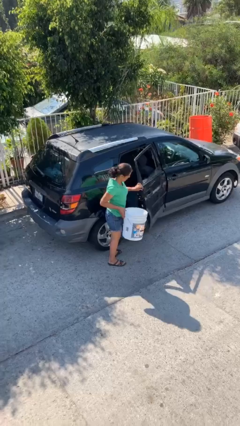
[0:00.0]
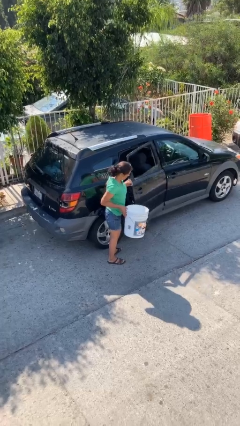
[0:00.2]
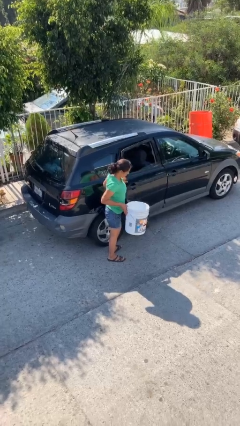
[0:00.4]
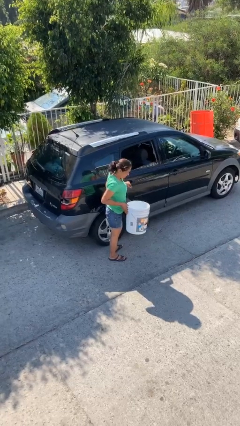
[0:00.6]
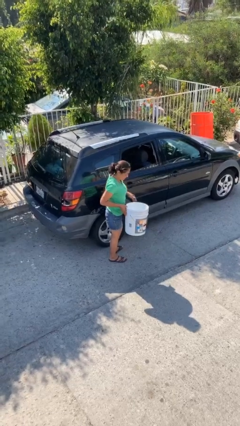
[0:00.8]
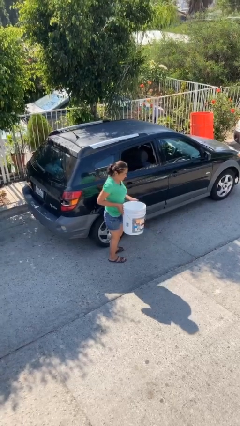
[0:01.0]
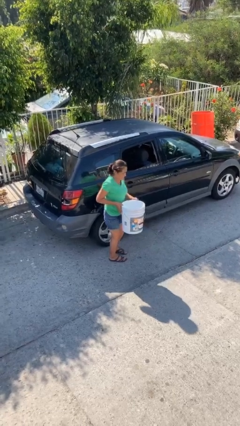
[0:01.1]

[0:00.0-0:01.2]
person closes car door

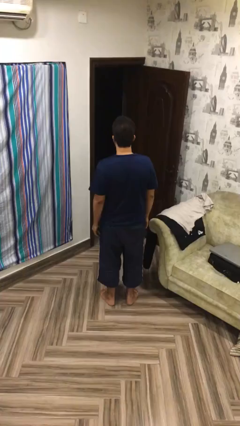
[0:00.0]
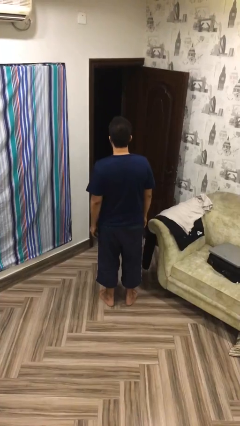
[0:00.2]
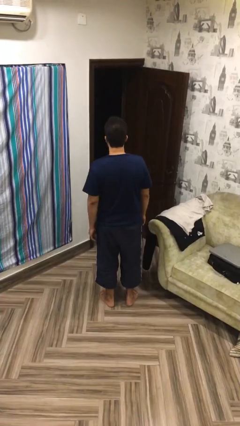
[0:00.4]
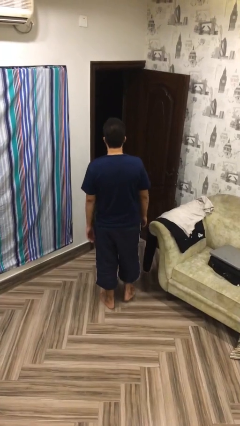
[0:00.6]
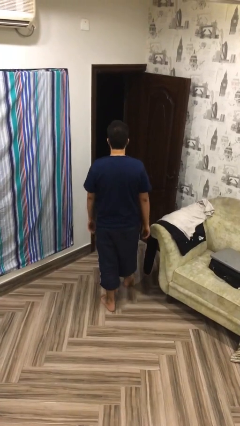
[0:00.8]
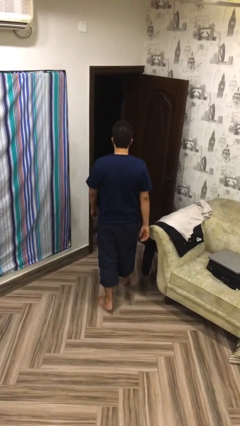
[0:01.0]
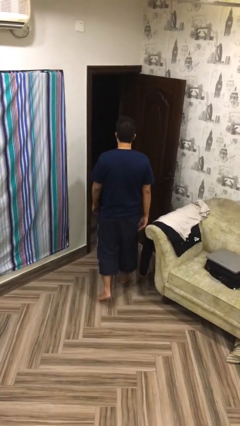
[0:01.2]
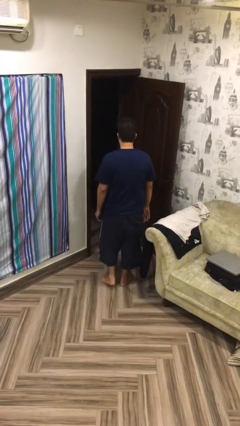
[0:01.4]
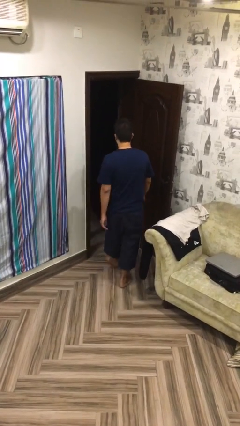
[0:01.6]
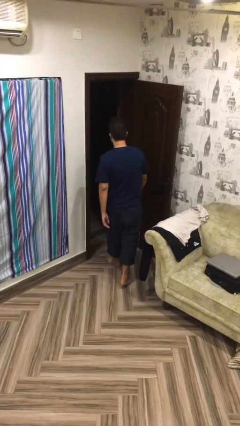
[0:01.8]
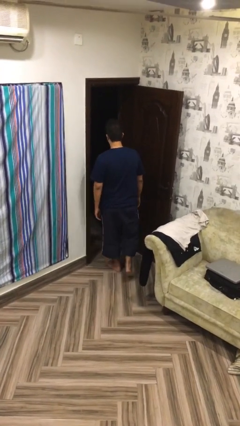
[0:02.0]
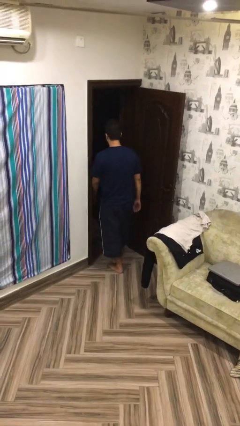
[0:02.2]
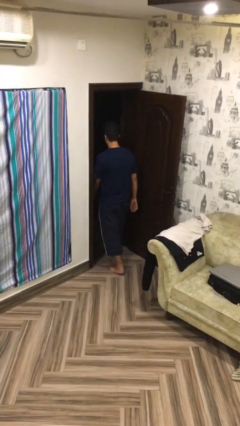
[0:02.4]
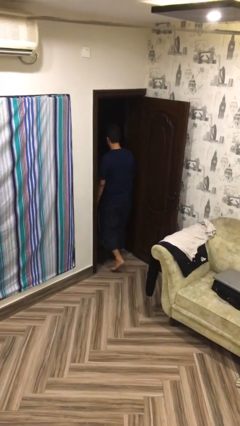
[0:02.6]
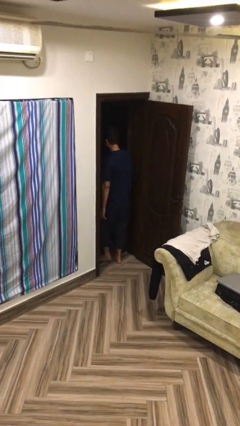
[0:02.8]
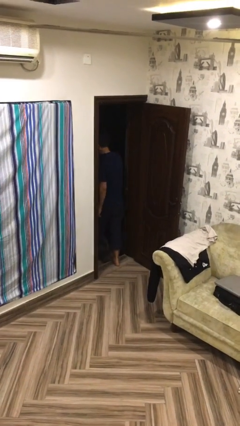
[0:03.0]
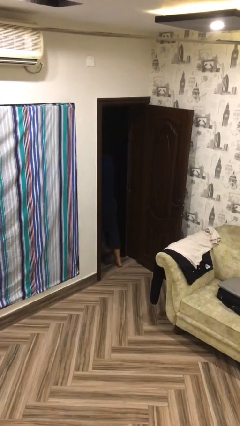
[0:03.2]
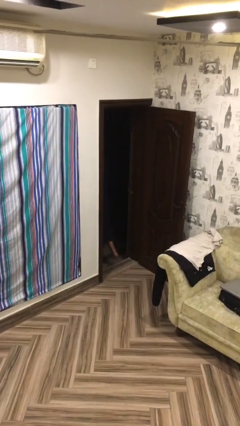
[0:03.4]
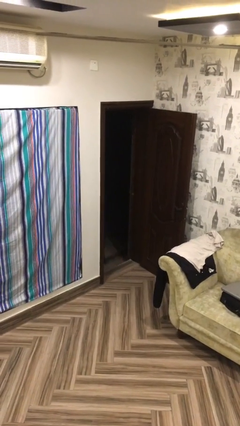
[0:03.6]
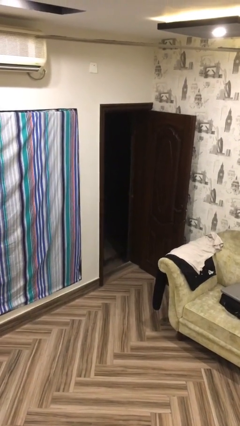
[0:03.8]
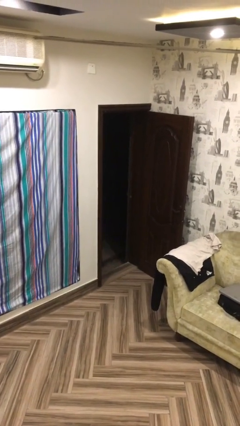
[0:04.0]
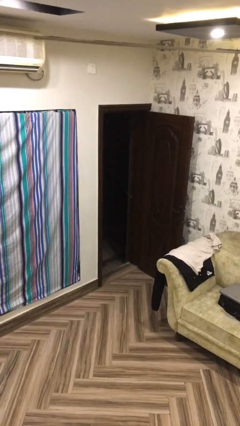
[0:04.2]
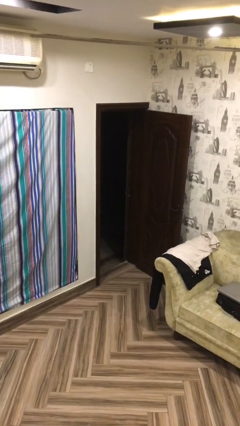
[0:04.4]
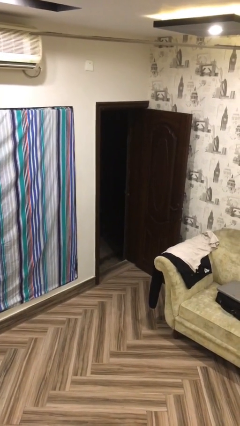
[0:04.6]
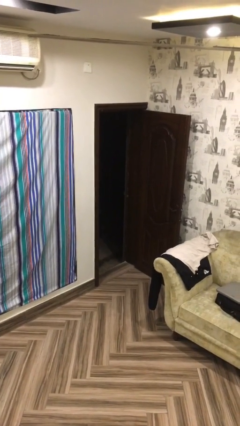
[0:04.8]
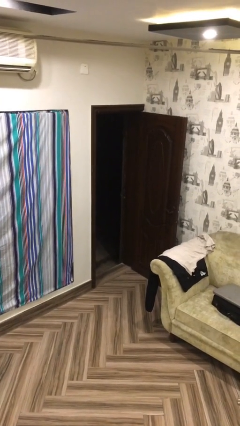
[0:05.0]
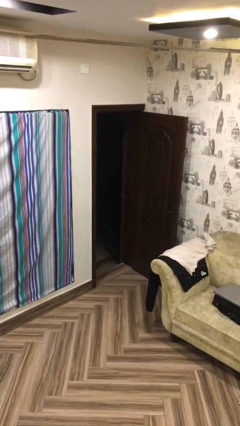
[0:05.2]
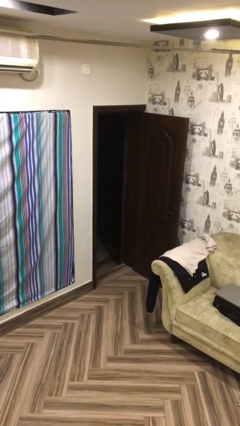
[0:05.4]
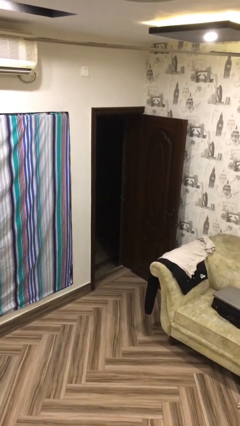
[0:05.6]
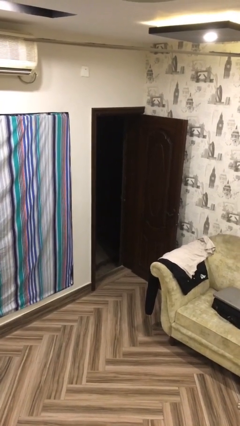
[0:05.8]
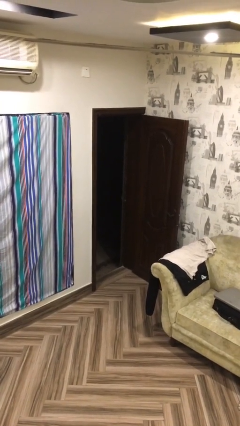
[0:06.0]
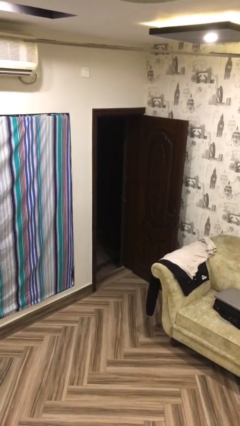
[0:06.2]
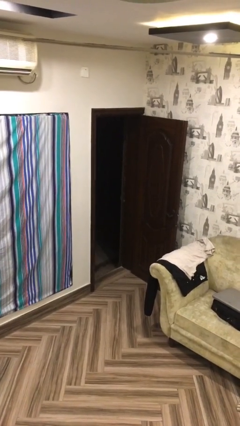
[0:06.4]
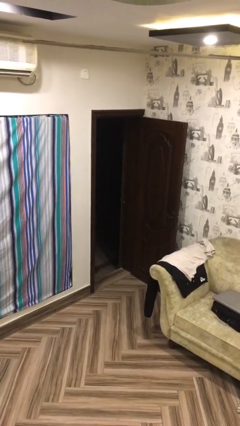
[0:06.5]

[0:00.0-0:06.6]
person exits scene through structure

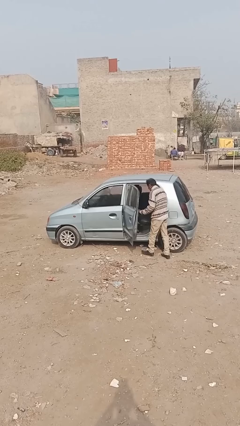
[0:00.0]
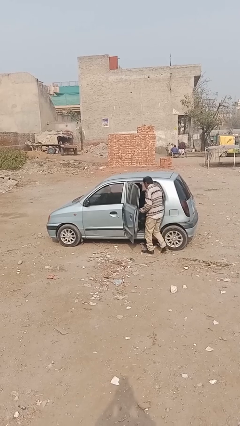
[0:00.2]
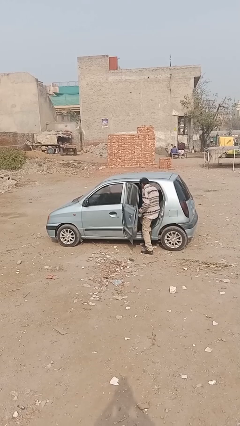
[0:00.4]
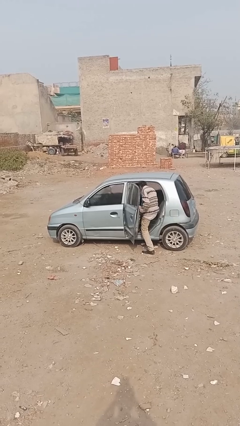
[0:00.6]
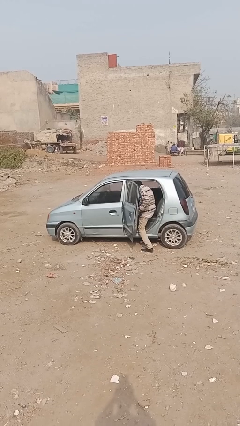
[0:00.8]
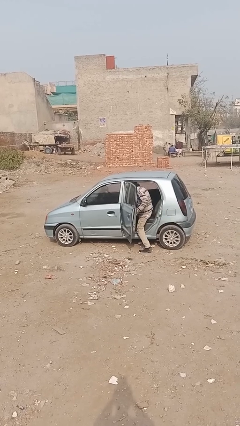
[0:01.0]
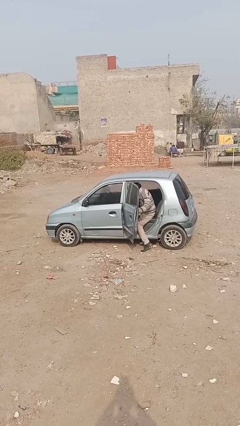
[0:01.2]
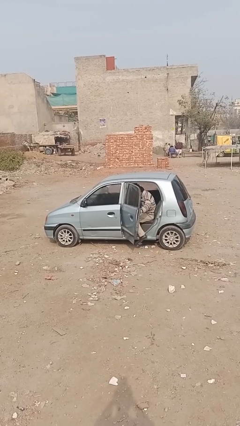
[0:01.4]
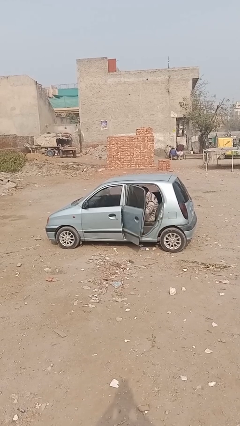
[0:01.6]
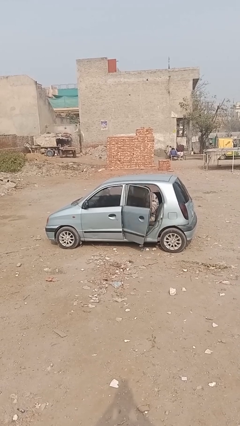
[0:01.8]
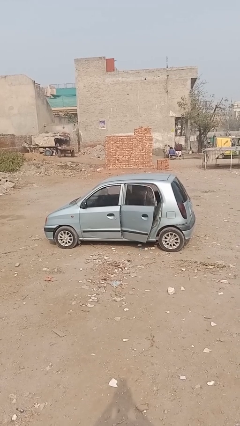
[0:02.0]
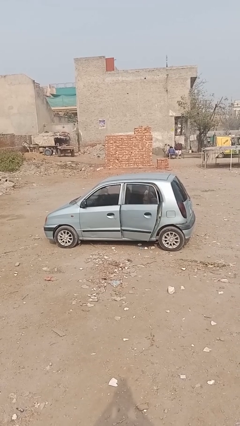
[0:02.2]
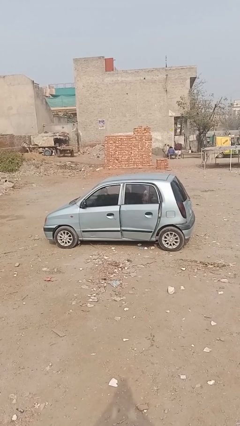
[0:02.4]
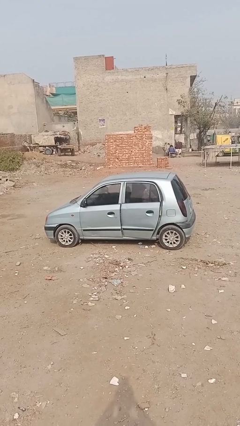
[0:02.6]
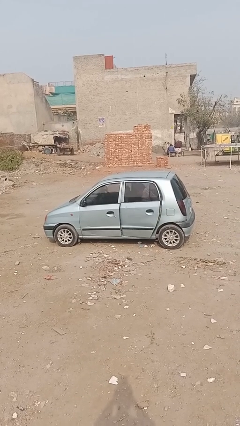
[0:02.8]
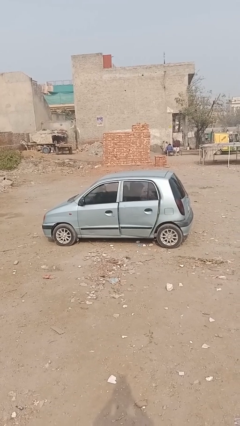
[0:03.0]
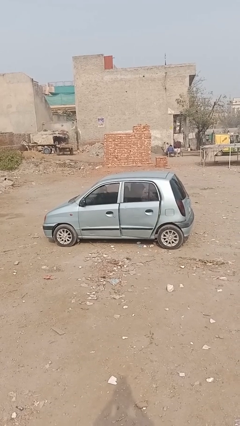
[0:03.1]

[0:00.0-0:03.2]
car picks up person

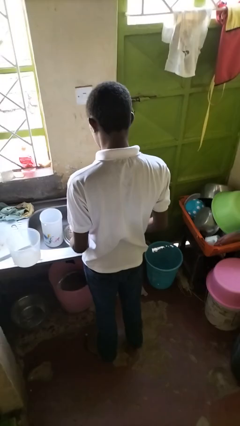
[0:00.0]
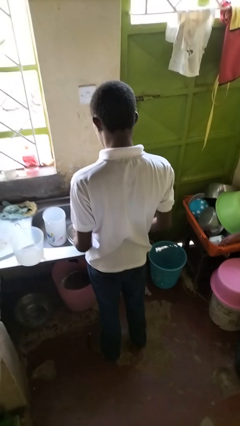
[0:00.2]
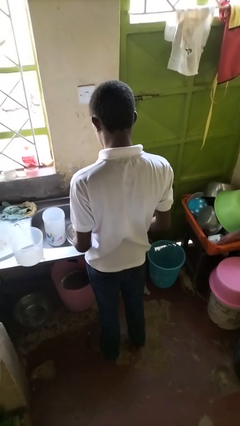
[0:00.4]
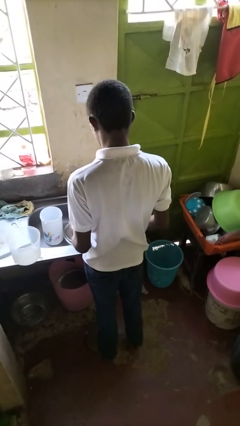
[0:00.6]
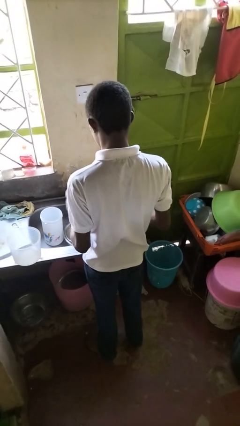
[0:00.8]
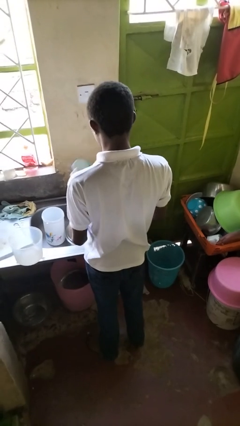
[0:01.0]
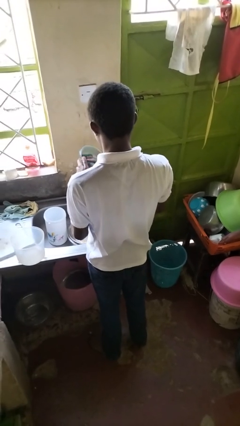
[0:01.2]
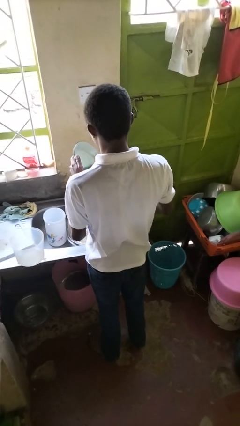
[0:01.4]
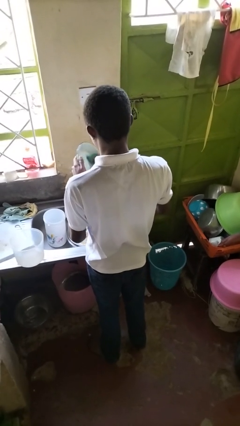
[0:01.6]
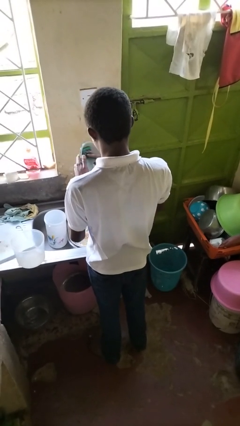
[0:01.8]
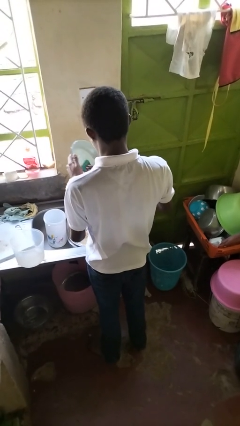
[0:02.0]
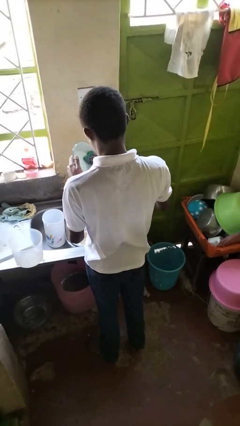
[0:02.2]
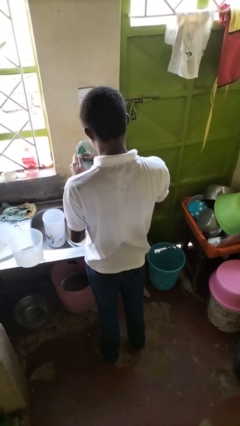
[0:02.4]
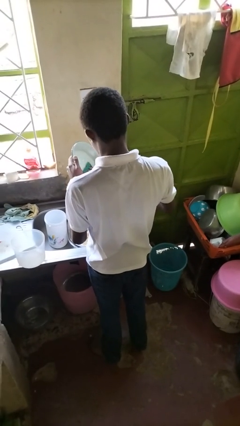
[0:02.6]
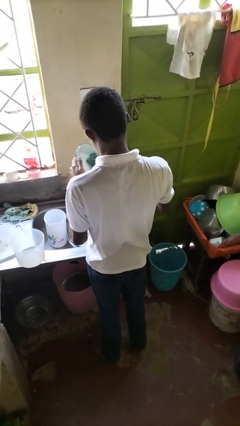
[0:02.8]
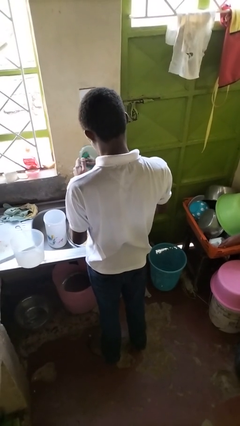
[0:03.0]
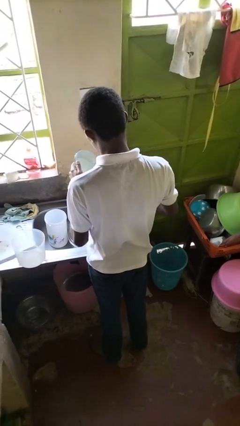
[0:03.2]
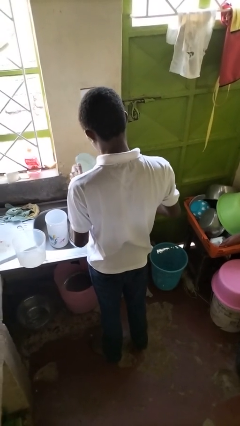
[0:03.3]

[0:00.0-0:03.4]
person washes dish

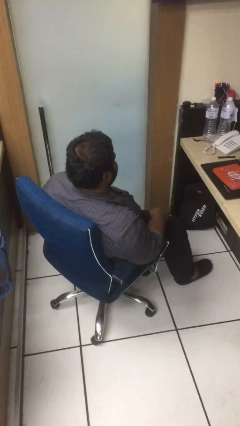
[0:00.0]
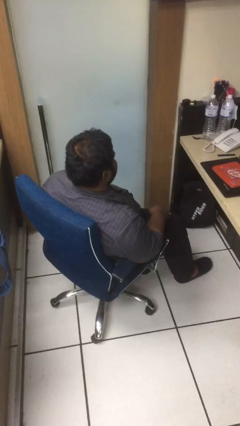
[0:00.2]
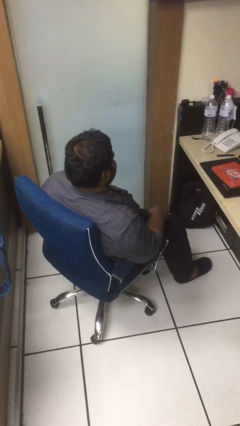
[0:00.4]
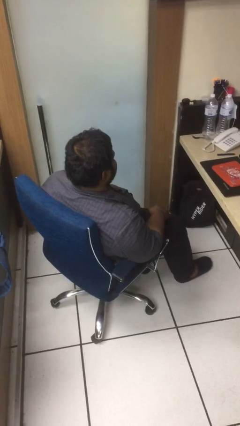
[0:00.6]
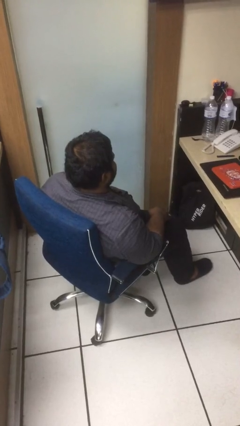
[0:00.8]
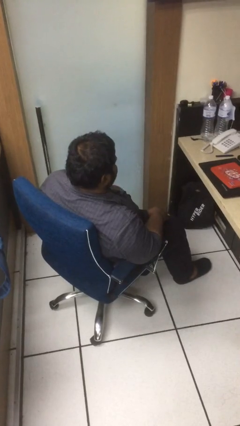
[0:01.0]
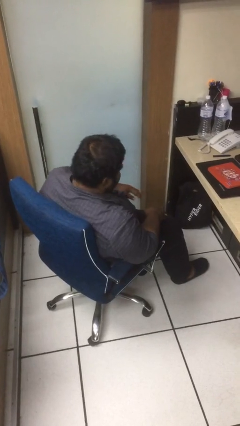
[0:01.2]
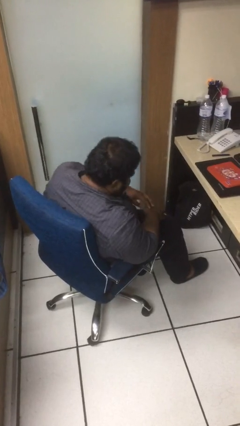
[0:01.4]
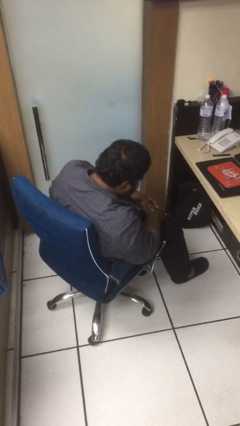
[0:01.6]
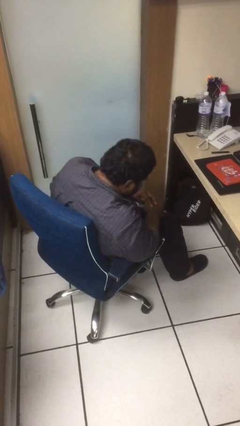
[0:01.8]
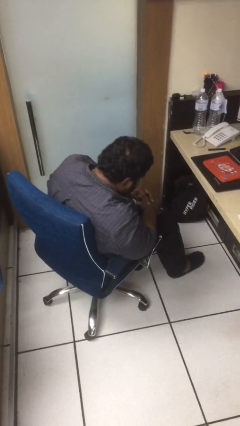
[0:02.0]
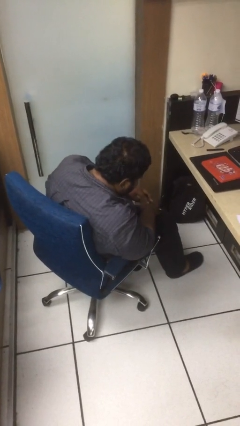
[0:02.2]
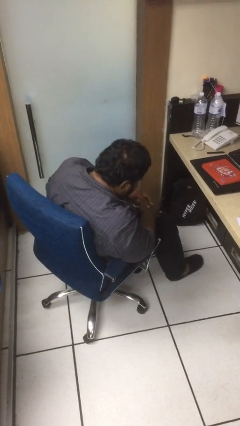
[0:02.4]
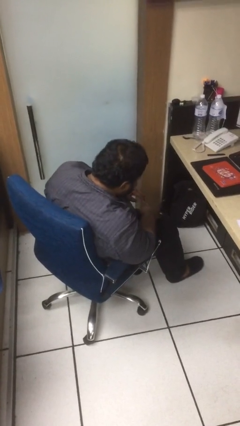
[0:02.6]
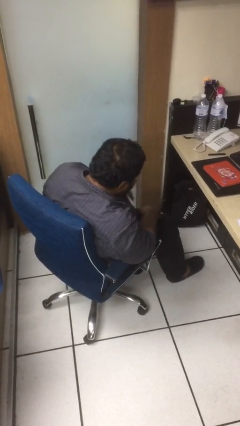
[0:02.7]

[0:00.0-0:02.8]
person looks at hands in lap

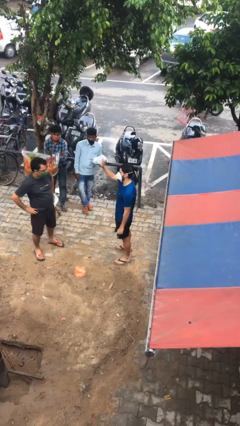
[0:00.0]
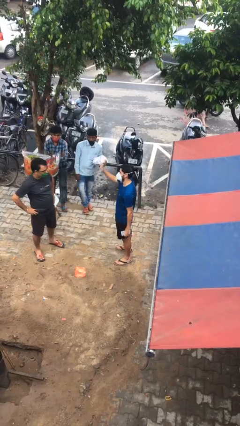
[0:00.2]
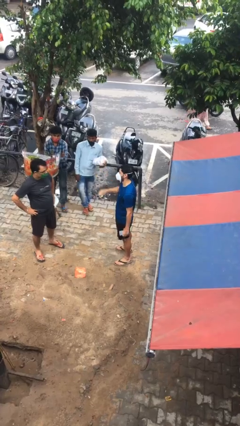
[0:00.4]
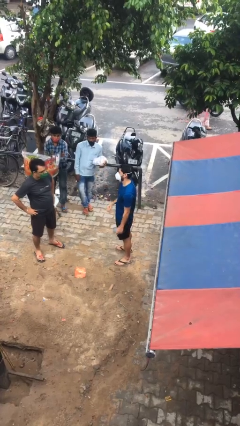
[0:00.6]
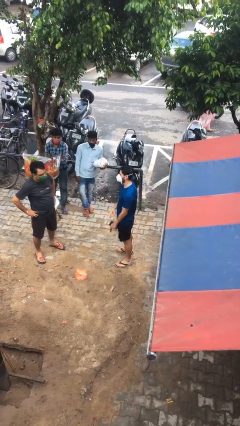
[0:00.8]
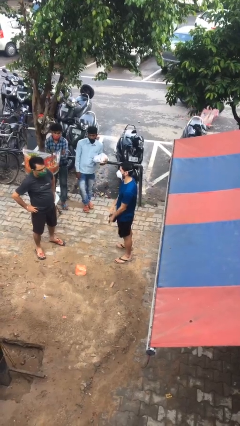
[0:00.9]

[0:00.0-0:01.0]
person waves at person
